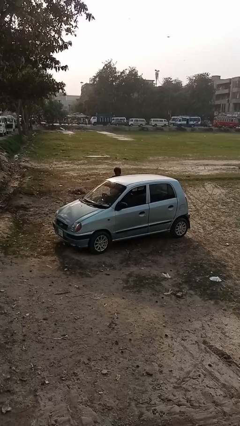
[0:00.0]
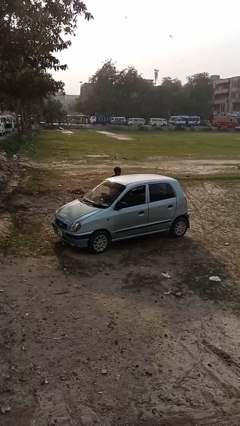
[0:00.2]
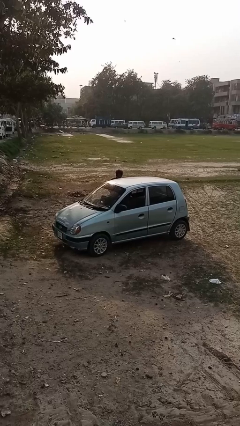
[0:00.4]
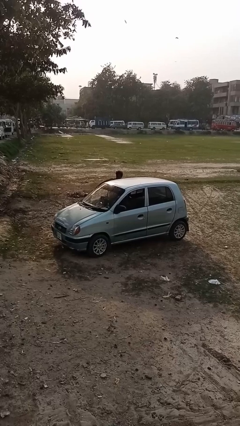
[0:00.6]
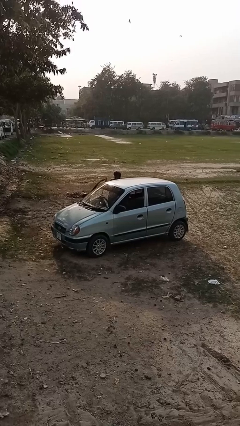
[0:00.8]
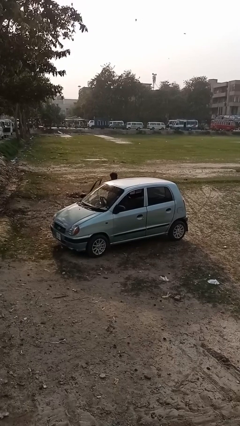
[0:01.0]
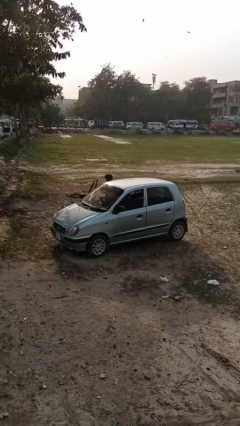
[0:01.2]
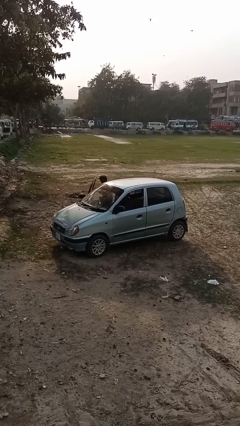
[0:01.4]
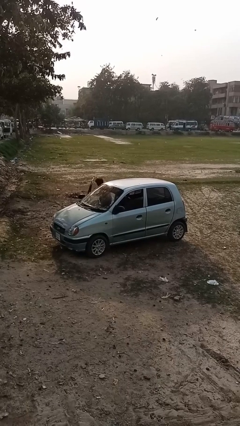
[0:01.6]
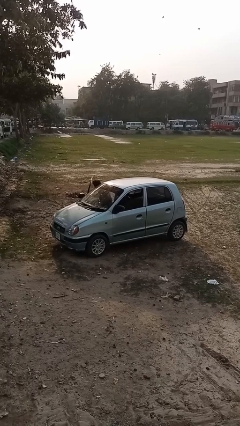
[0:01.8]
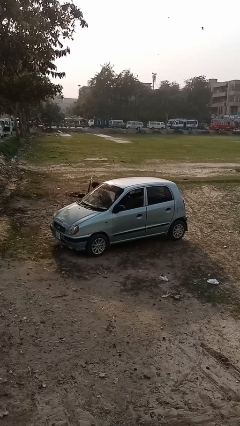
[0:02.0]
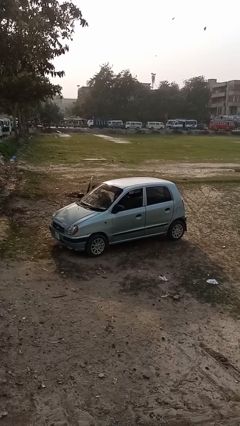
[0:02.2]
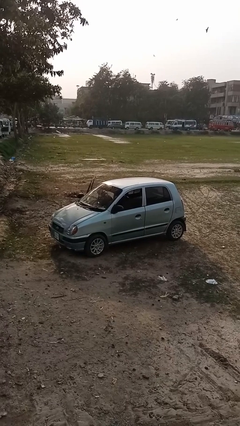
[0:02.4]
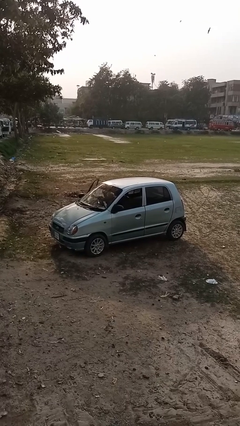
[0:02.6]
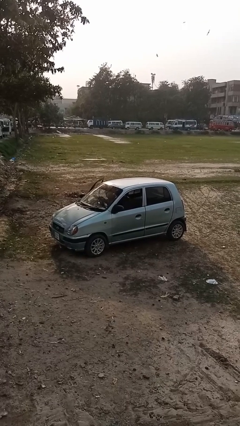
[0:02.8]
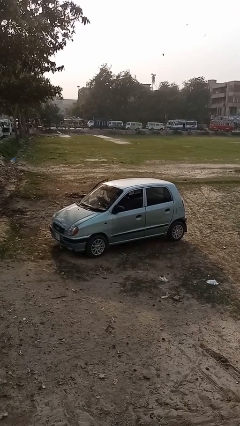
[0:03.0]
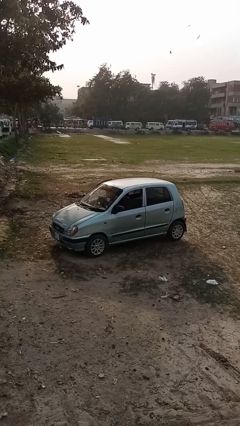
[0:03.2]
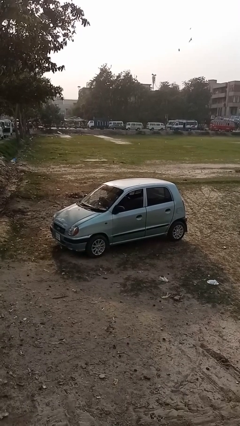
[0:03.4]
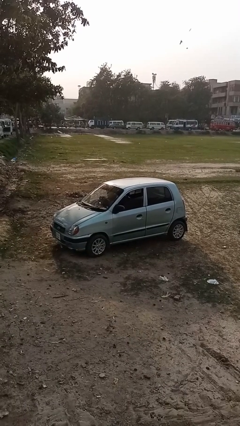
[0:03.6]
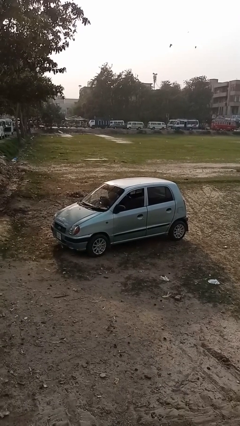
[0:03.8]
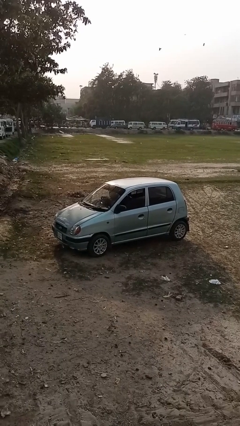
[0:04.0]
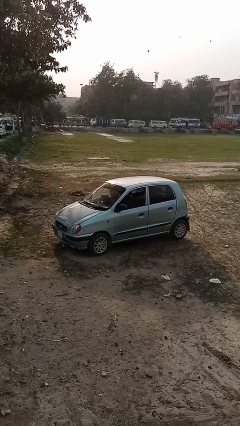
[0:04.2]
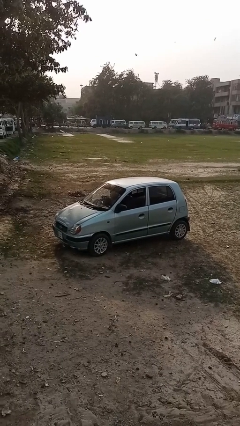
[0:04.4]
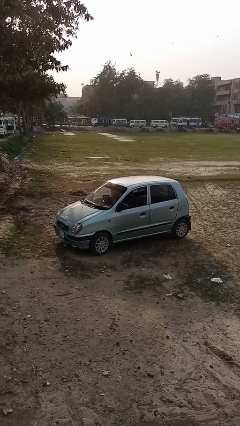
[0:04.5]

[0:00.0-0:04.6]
car picks up person

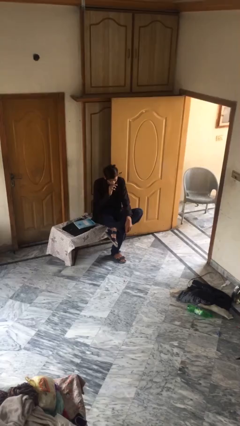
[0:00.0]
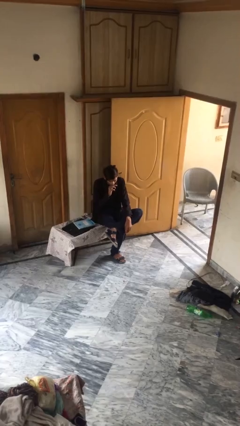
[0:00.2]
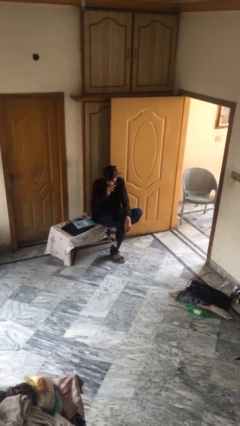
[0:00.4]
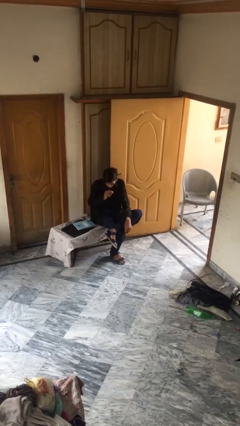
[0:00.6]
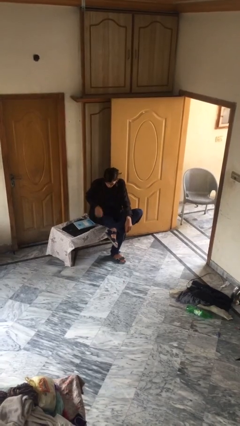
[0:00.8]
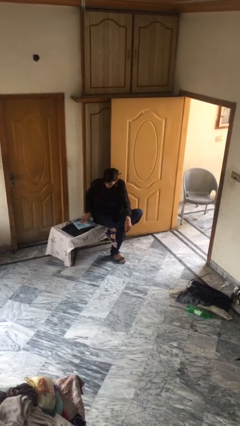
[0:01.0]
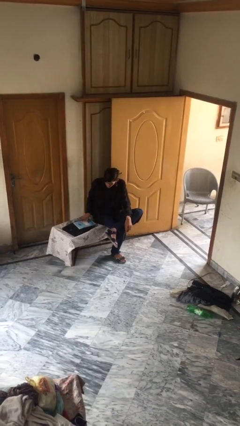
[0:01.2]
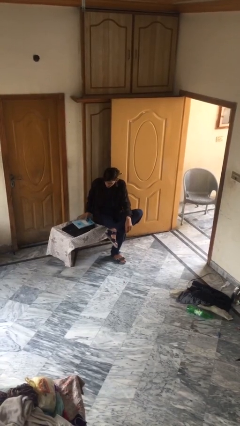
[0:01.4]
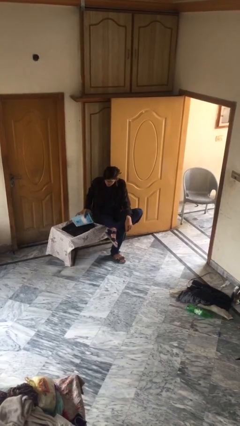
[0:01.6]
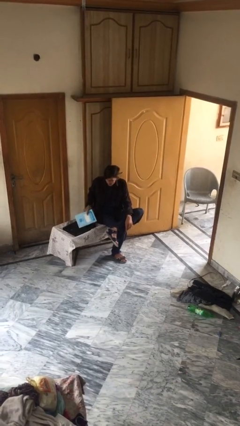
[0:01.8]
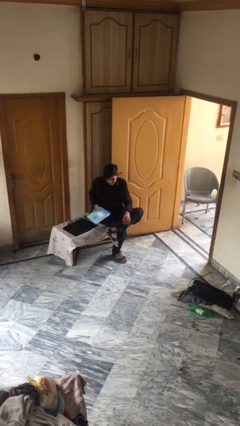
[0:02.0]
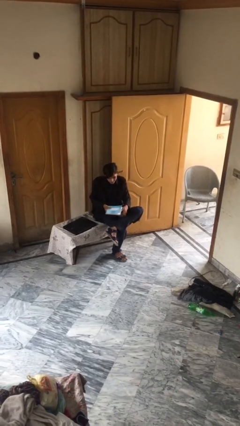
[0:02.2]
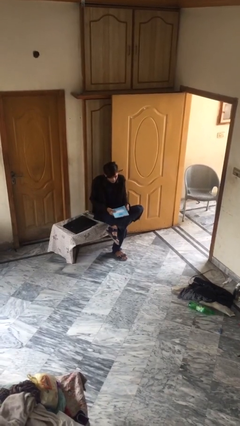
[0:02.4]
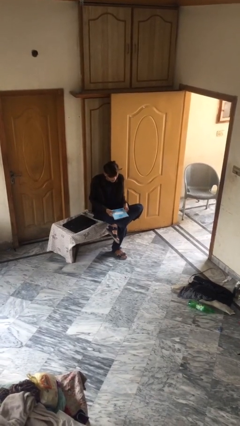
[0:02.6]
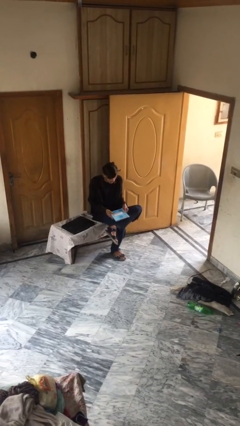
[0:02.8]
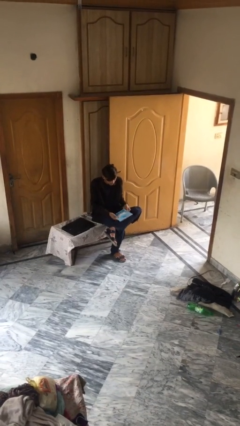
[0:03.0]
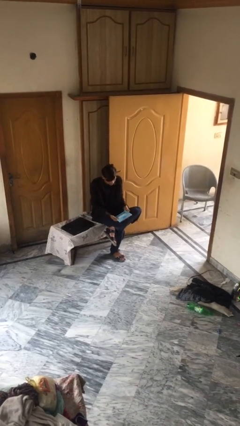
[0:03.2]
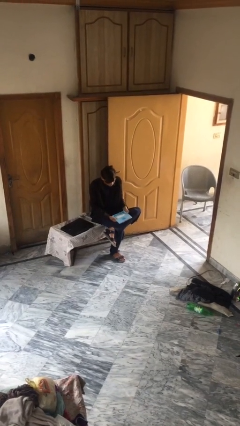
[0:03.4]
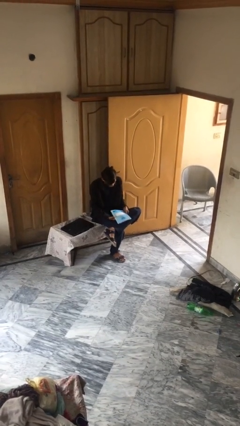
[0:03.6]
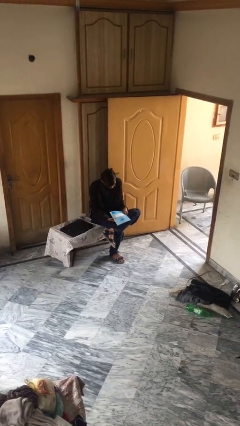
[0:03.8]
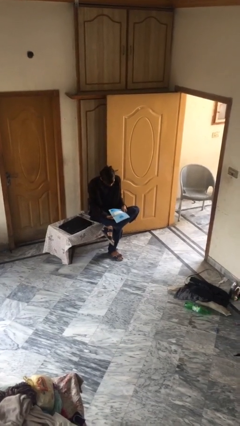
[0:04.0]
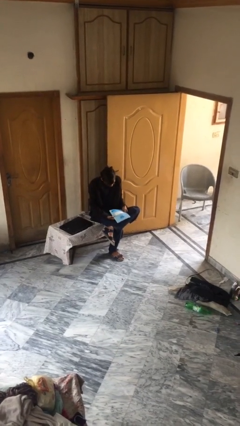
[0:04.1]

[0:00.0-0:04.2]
person picks up object from table

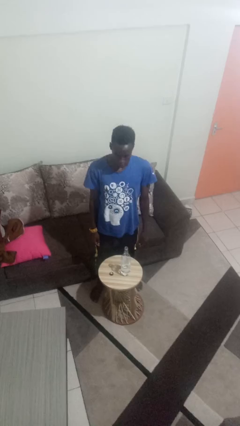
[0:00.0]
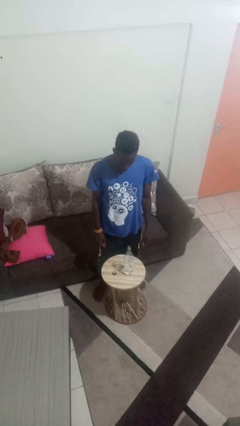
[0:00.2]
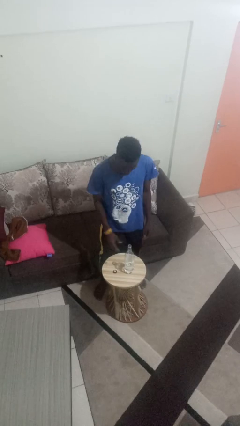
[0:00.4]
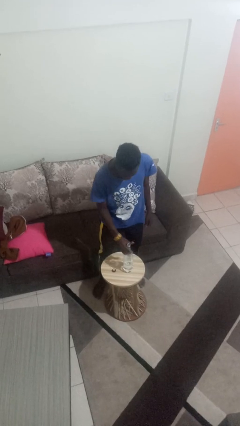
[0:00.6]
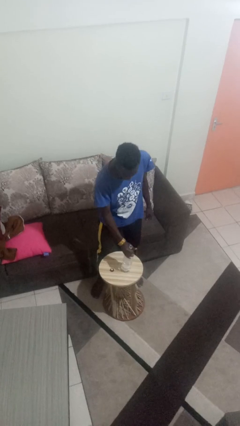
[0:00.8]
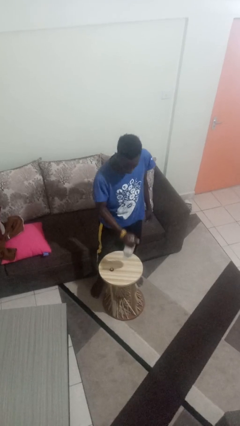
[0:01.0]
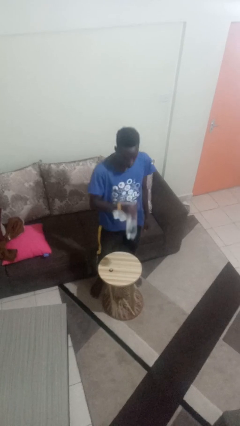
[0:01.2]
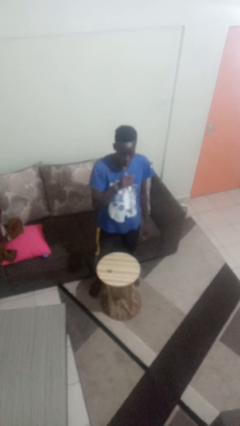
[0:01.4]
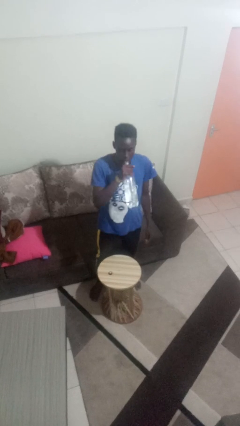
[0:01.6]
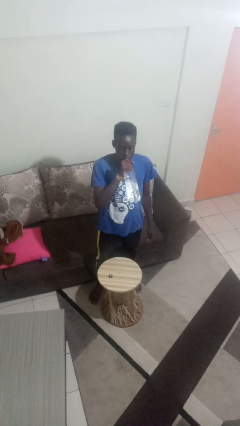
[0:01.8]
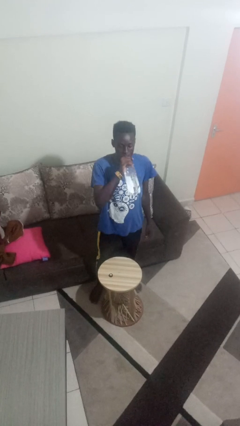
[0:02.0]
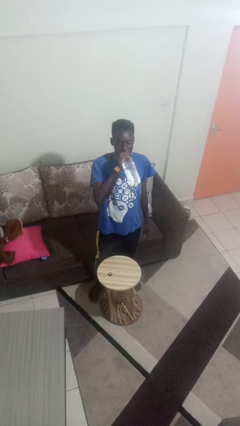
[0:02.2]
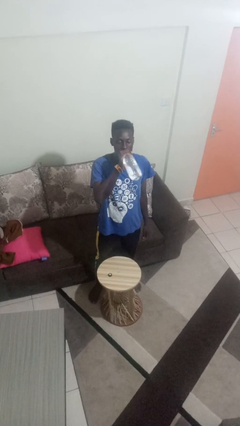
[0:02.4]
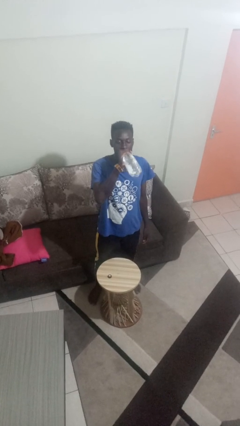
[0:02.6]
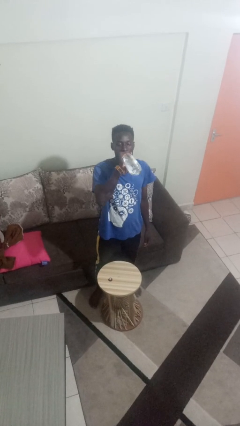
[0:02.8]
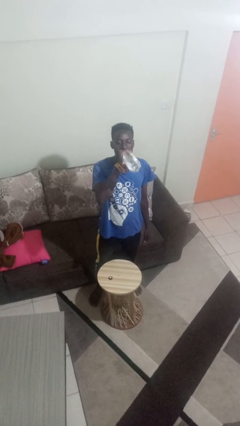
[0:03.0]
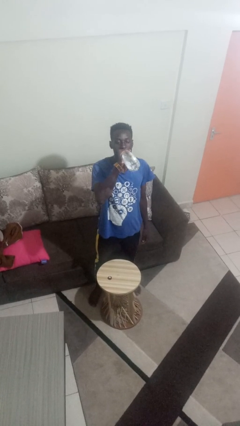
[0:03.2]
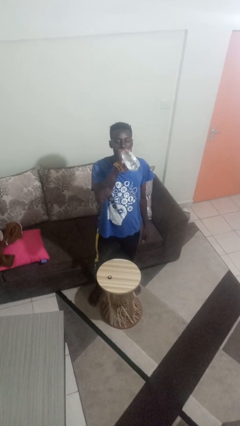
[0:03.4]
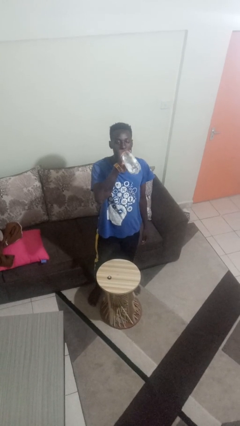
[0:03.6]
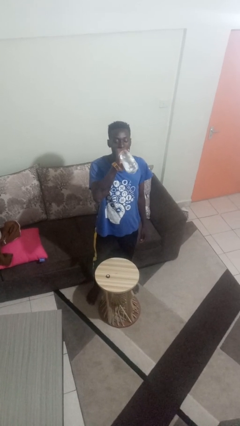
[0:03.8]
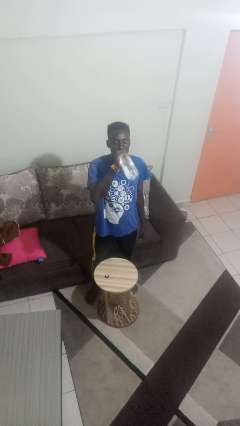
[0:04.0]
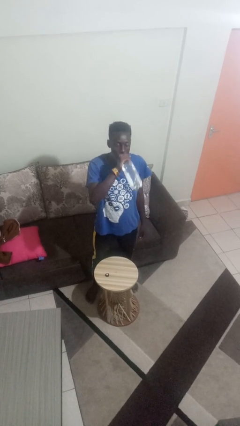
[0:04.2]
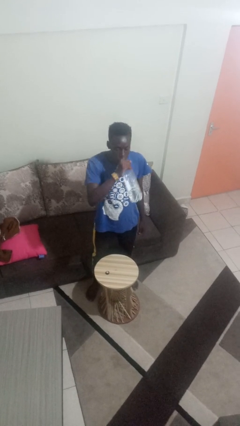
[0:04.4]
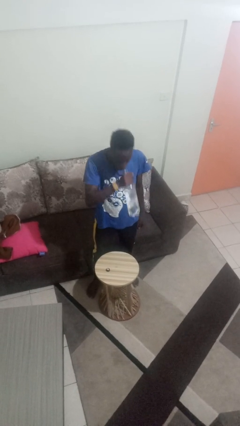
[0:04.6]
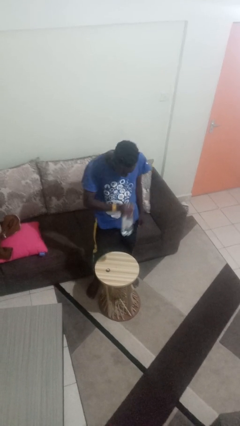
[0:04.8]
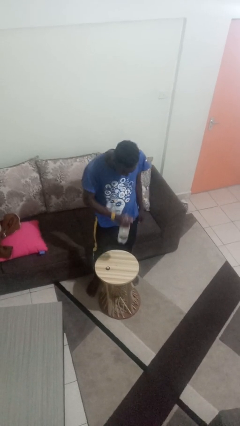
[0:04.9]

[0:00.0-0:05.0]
person drinks from bottle

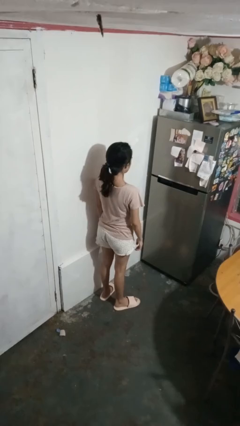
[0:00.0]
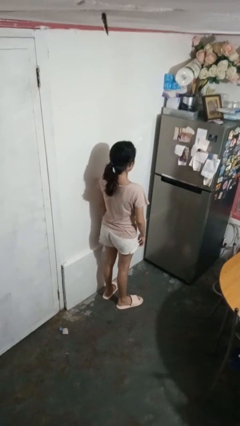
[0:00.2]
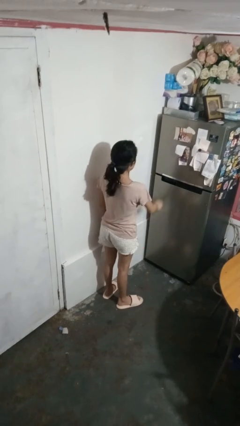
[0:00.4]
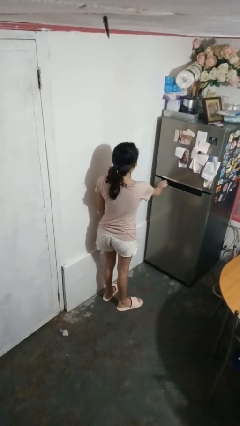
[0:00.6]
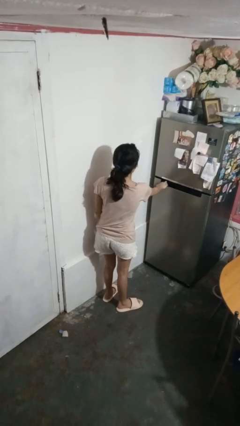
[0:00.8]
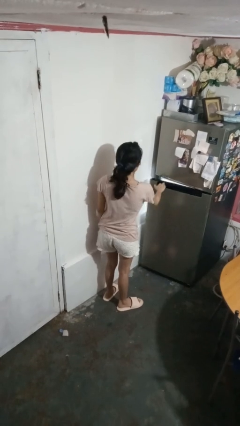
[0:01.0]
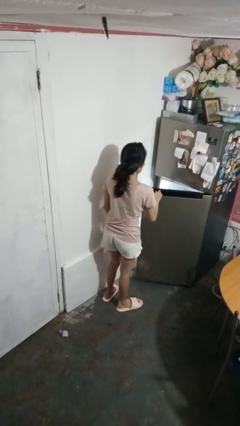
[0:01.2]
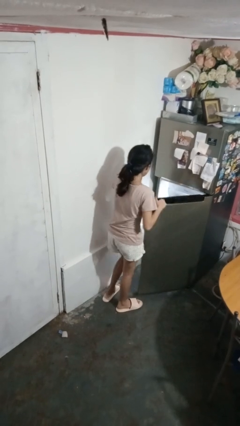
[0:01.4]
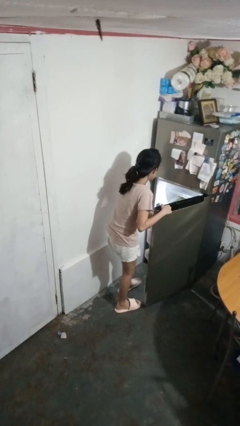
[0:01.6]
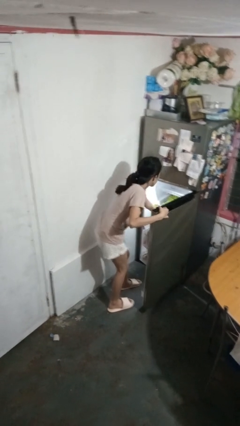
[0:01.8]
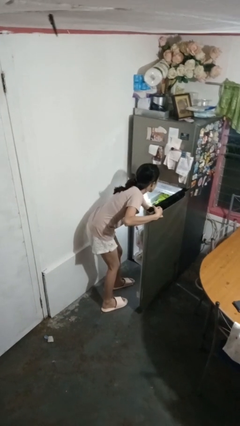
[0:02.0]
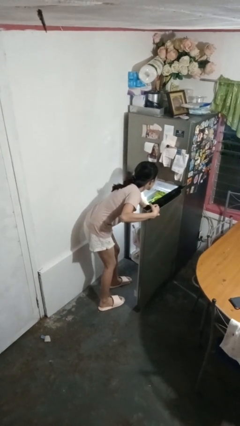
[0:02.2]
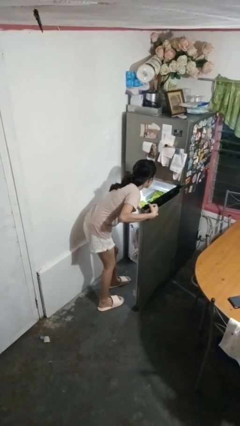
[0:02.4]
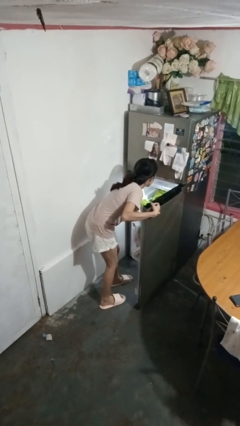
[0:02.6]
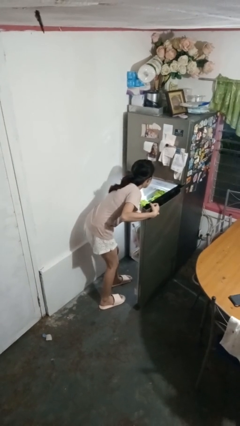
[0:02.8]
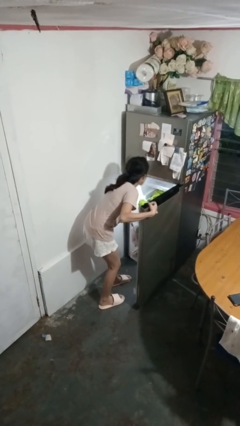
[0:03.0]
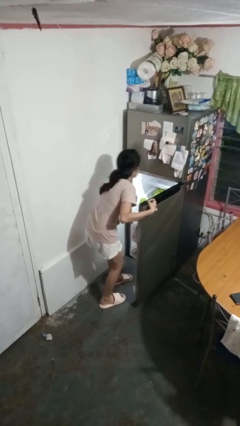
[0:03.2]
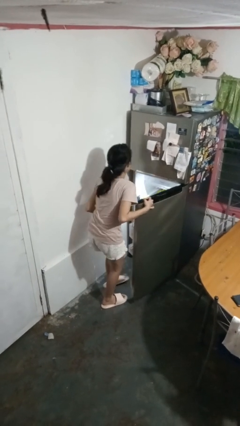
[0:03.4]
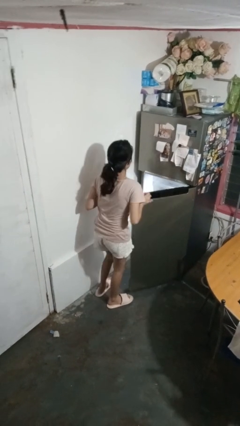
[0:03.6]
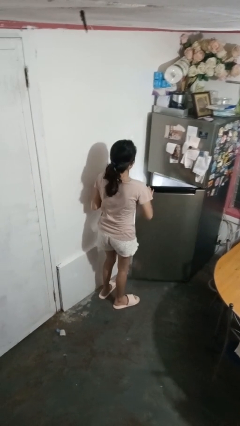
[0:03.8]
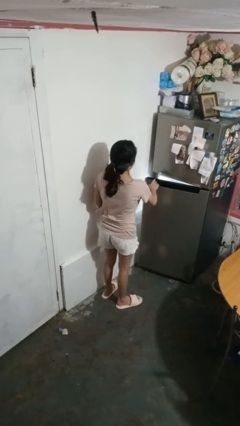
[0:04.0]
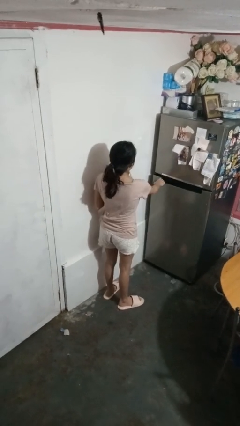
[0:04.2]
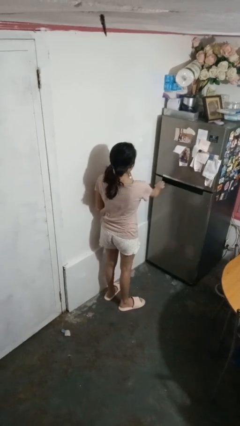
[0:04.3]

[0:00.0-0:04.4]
person takes object from refrigerator
